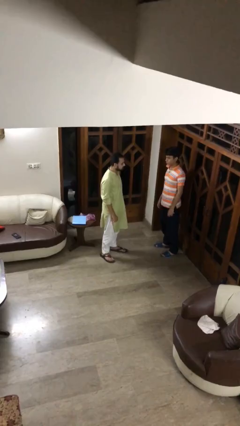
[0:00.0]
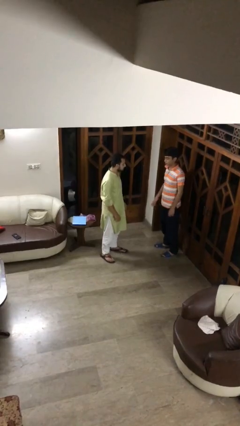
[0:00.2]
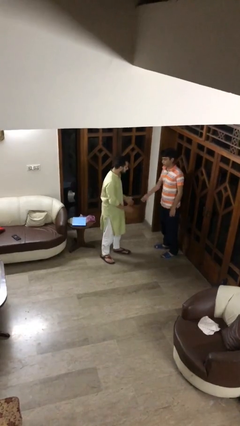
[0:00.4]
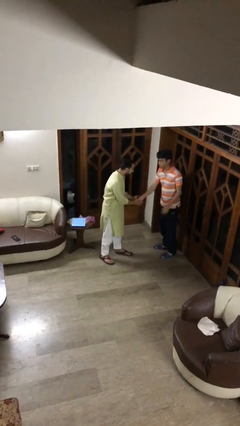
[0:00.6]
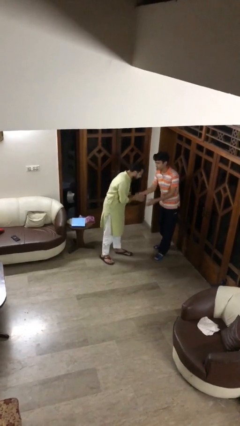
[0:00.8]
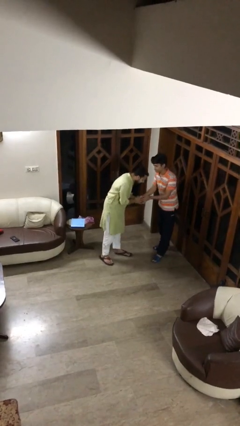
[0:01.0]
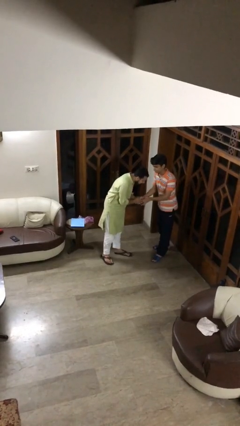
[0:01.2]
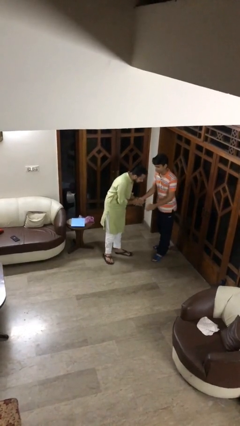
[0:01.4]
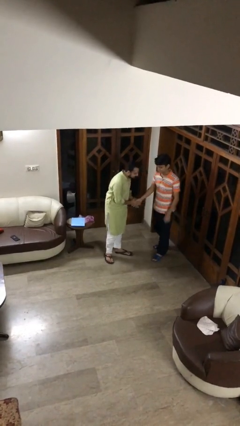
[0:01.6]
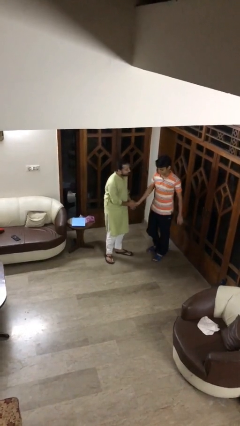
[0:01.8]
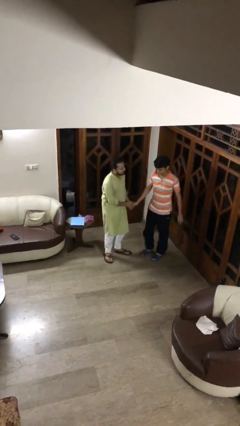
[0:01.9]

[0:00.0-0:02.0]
person shakes hand

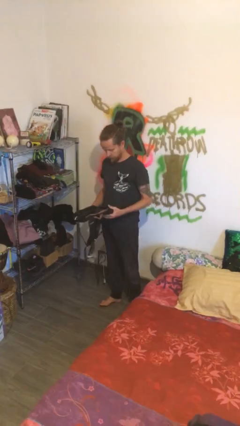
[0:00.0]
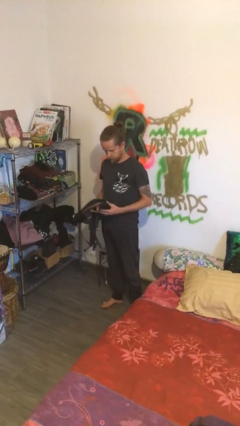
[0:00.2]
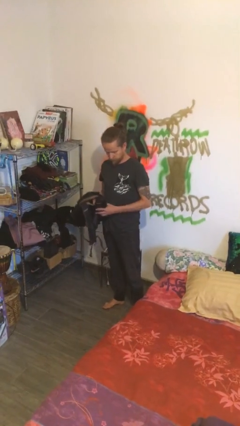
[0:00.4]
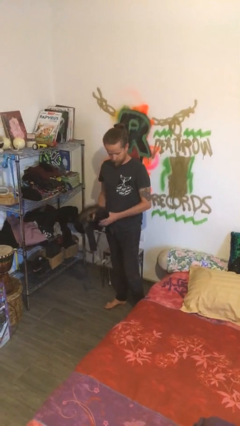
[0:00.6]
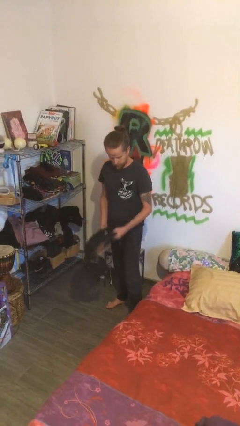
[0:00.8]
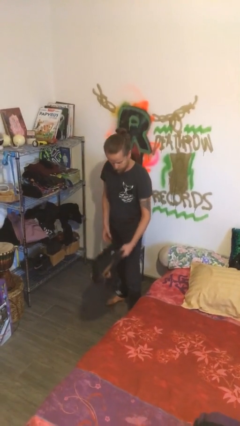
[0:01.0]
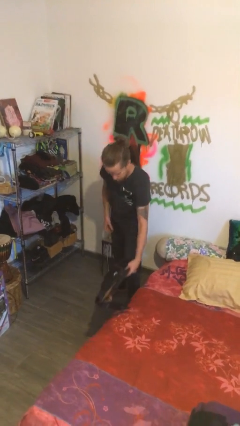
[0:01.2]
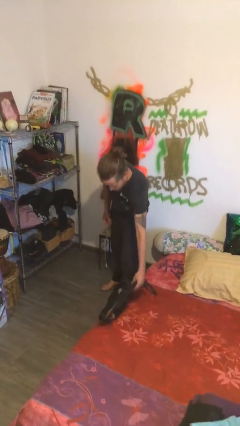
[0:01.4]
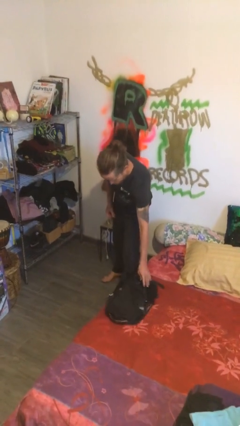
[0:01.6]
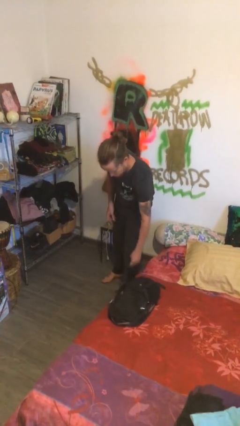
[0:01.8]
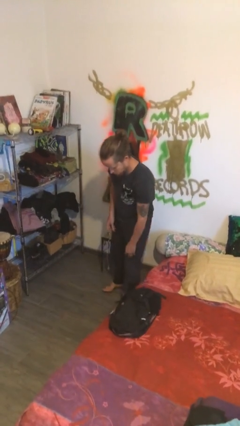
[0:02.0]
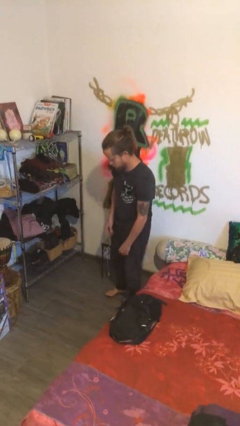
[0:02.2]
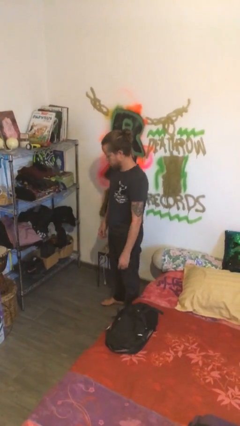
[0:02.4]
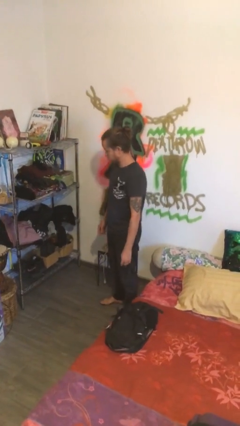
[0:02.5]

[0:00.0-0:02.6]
person puts down object on bed

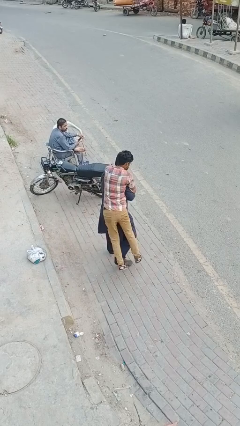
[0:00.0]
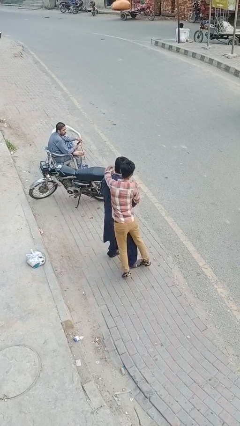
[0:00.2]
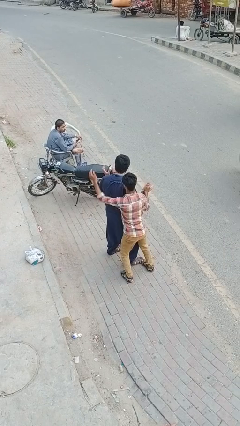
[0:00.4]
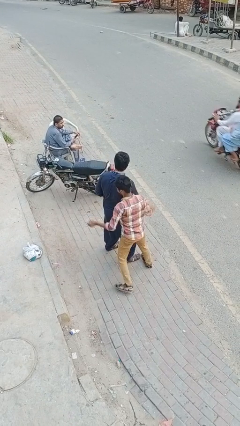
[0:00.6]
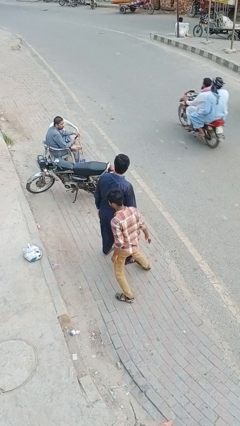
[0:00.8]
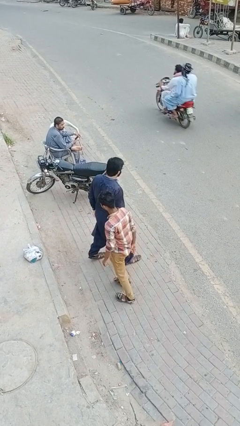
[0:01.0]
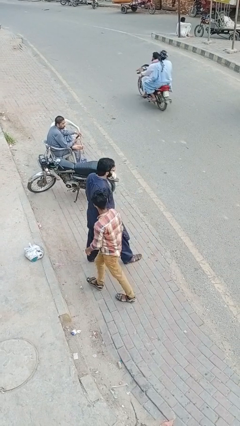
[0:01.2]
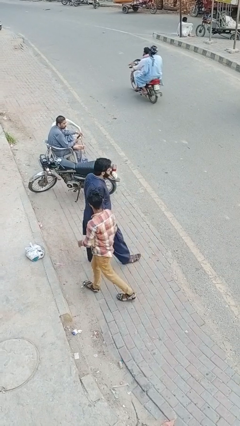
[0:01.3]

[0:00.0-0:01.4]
person puts down person

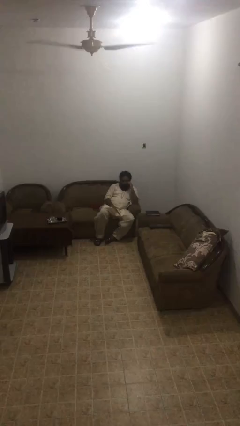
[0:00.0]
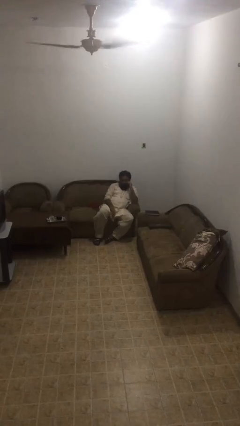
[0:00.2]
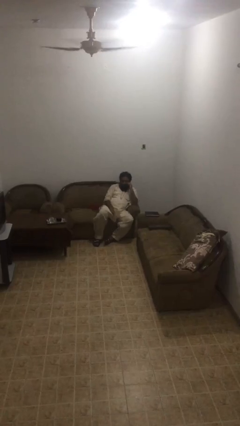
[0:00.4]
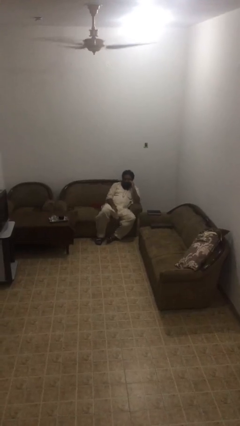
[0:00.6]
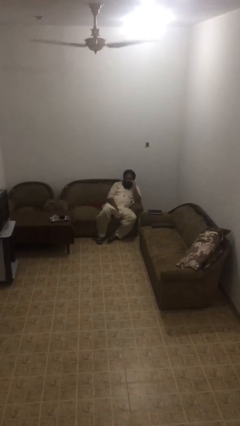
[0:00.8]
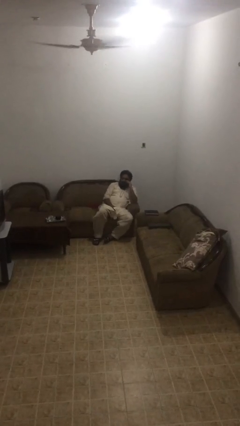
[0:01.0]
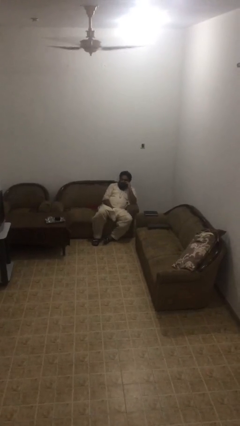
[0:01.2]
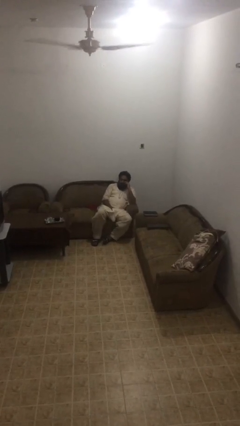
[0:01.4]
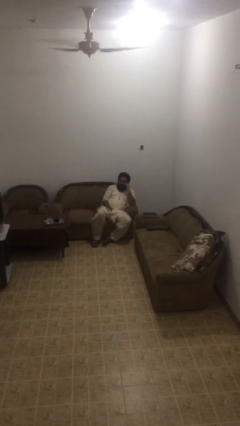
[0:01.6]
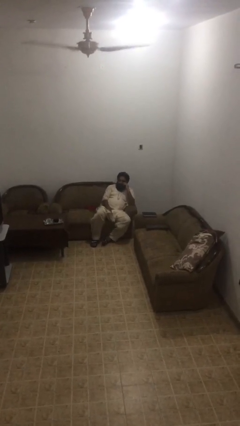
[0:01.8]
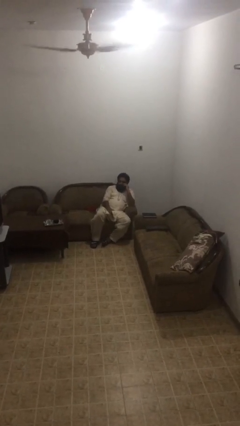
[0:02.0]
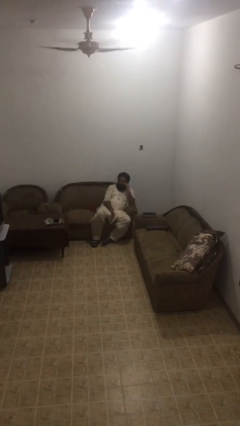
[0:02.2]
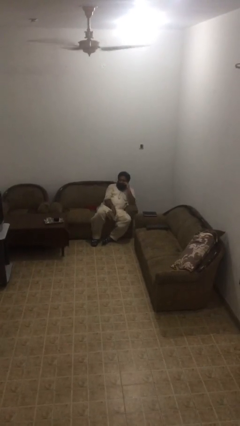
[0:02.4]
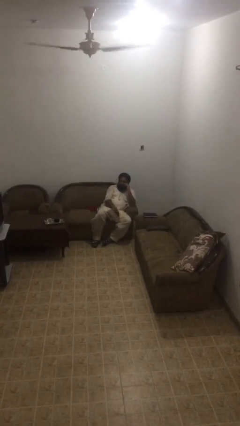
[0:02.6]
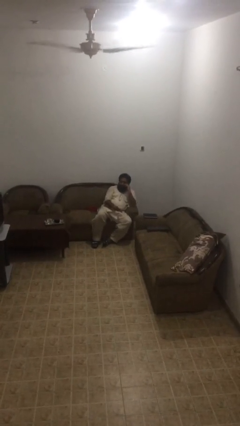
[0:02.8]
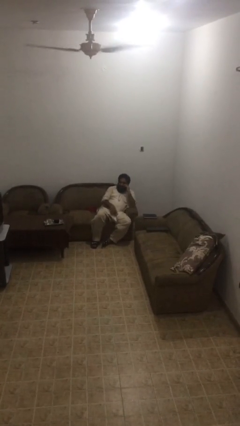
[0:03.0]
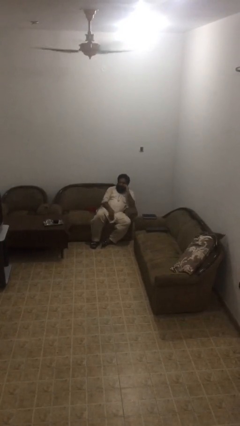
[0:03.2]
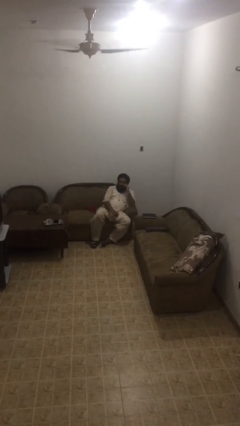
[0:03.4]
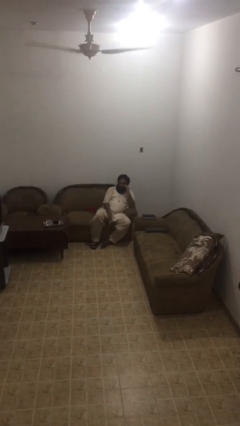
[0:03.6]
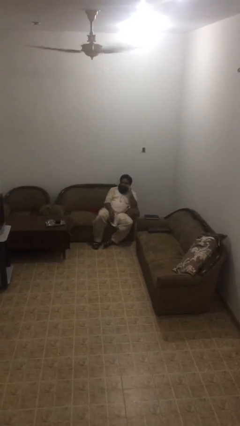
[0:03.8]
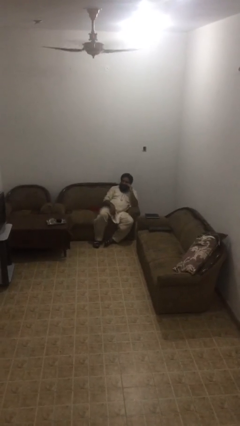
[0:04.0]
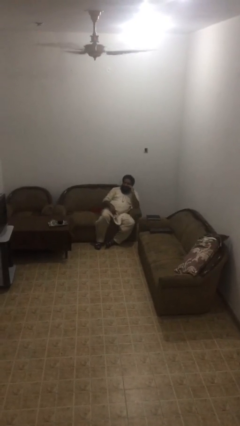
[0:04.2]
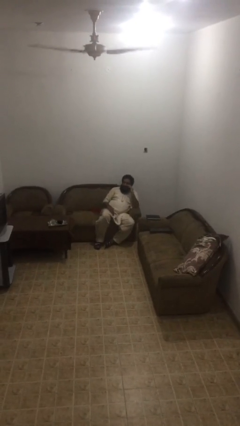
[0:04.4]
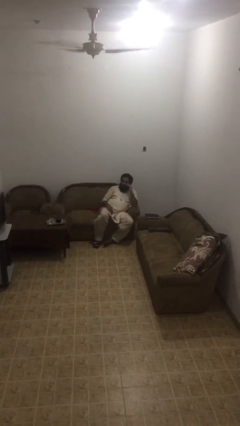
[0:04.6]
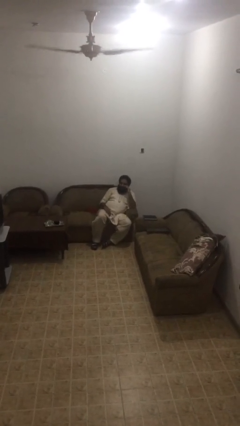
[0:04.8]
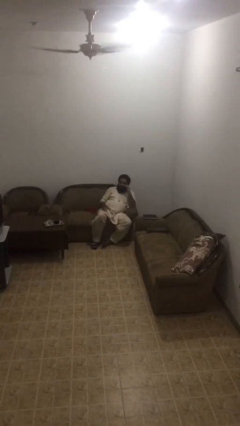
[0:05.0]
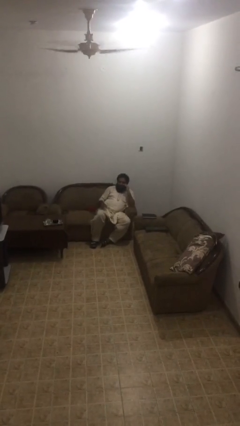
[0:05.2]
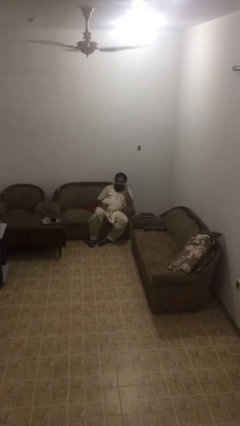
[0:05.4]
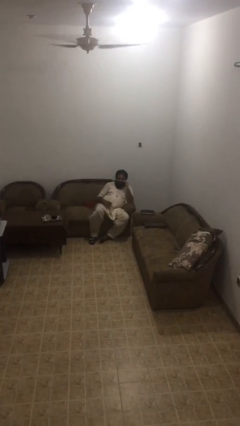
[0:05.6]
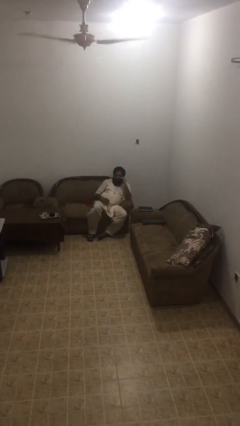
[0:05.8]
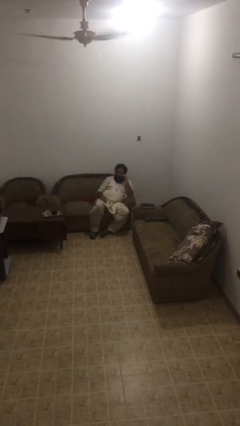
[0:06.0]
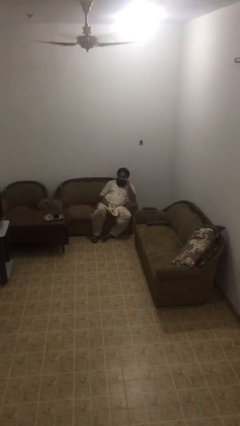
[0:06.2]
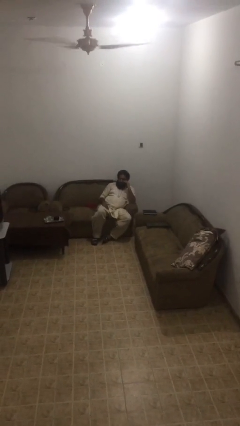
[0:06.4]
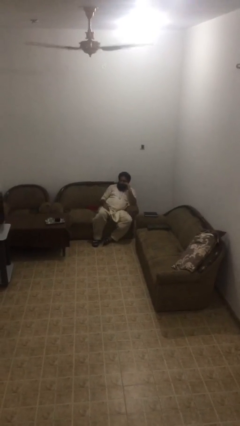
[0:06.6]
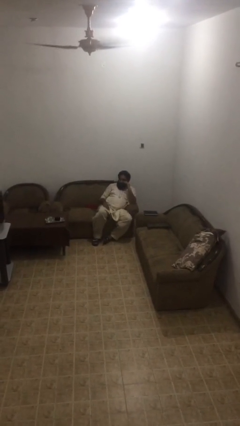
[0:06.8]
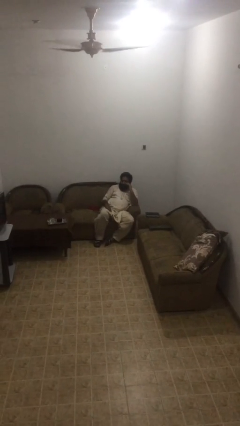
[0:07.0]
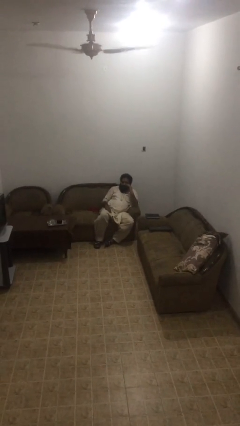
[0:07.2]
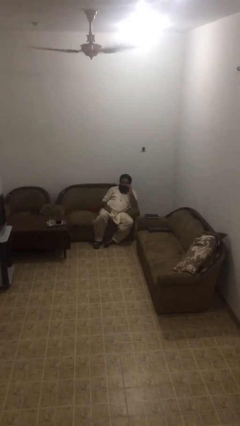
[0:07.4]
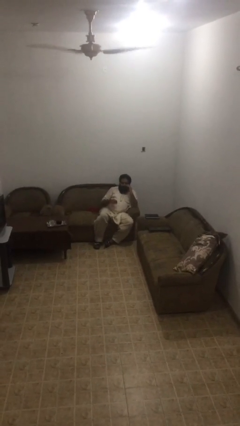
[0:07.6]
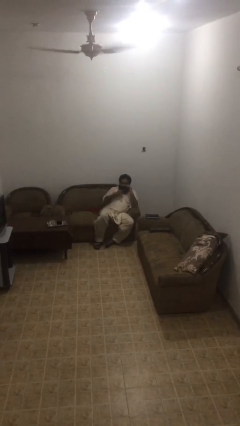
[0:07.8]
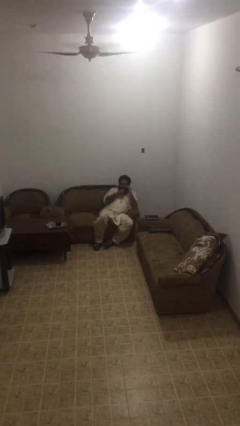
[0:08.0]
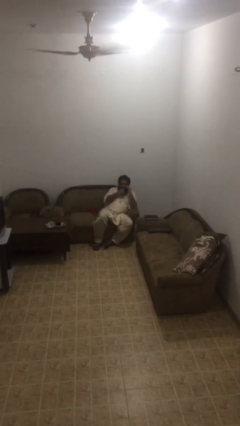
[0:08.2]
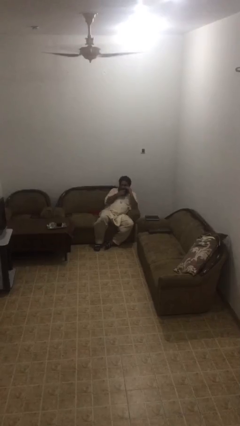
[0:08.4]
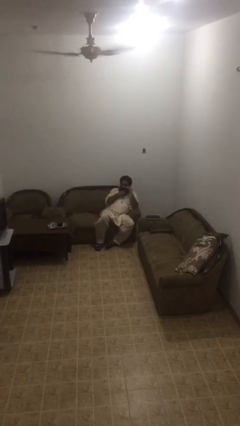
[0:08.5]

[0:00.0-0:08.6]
person talks on phone

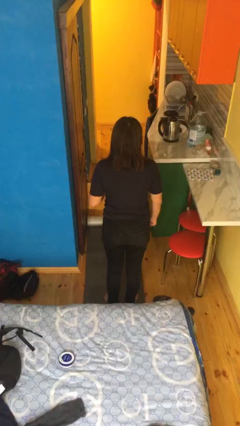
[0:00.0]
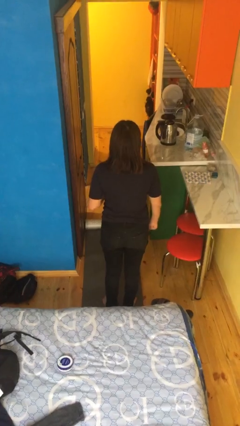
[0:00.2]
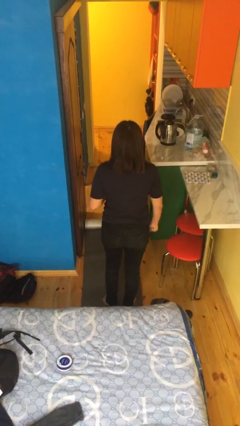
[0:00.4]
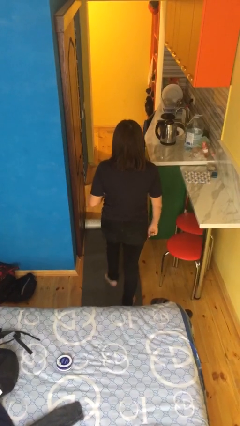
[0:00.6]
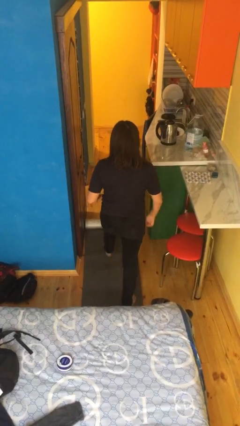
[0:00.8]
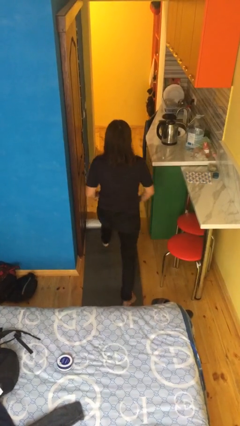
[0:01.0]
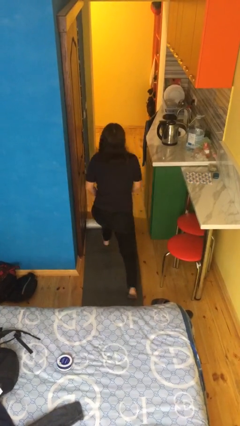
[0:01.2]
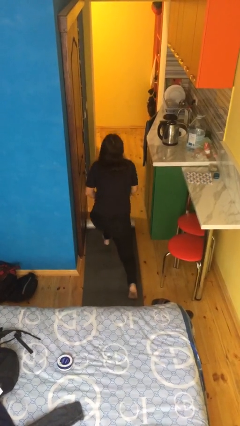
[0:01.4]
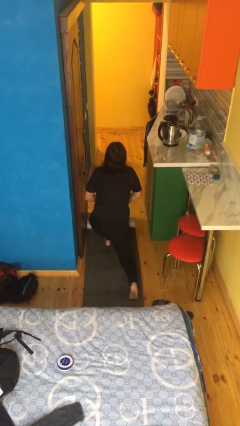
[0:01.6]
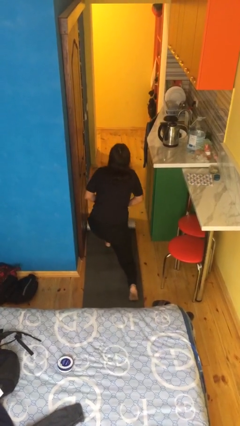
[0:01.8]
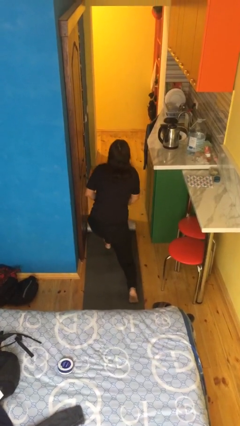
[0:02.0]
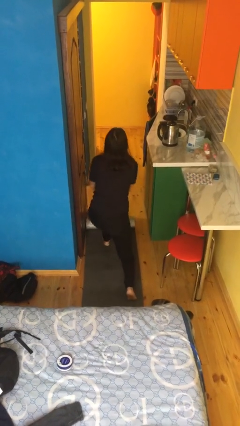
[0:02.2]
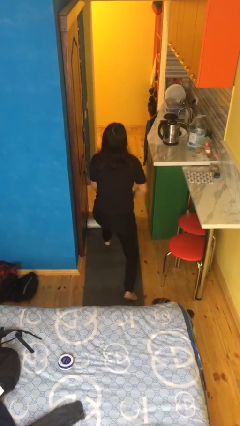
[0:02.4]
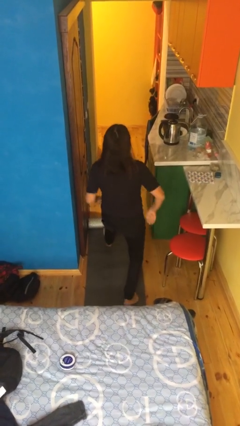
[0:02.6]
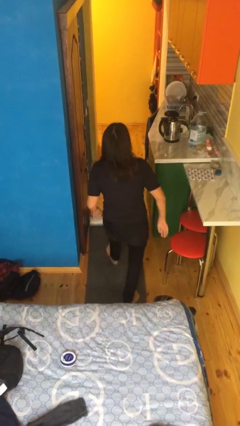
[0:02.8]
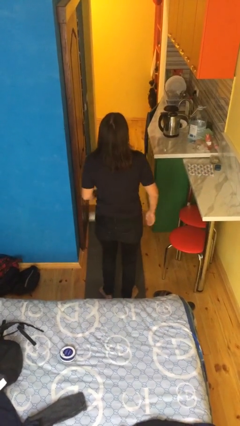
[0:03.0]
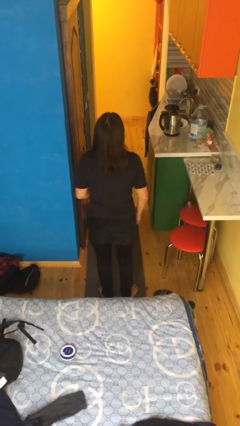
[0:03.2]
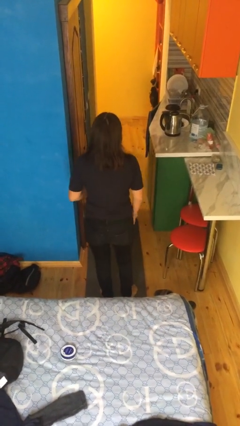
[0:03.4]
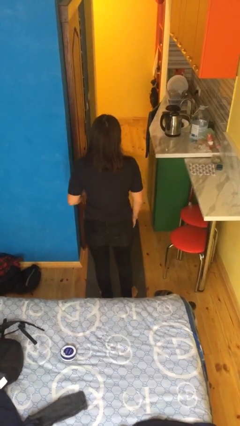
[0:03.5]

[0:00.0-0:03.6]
person exercises with lunges
